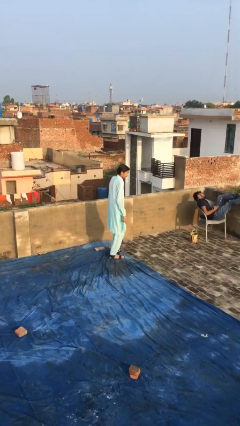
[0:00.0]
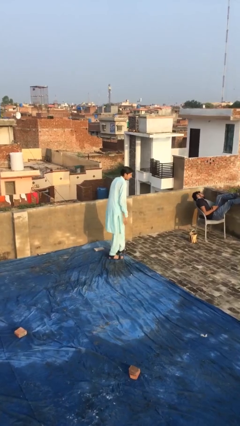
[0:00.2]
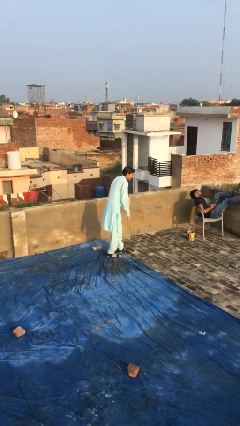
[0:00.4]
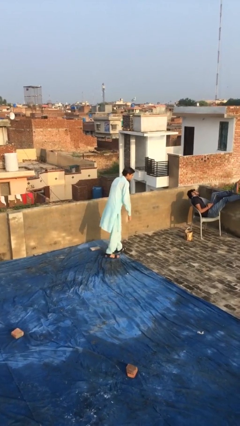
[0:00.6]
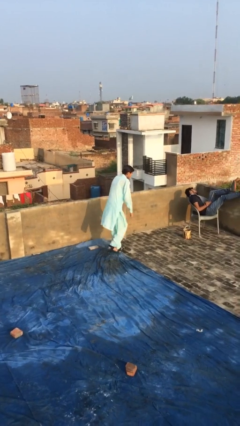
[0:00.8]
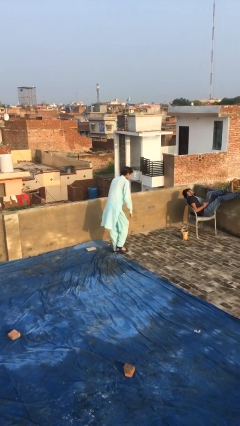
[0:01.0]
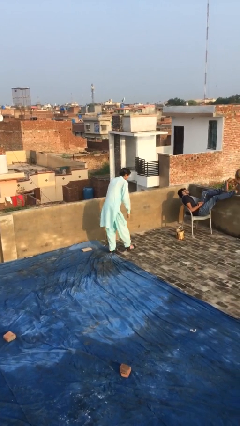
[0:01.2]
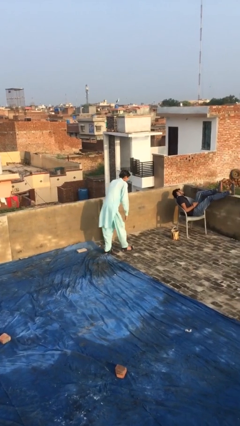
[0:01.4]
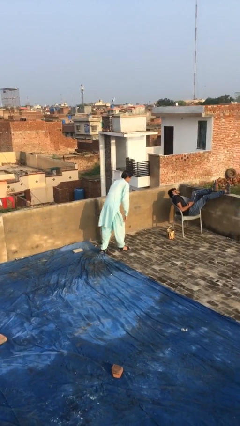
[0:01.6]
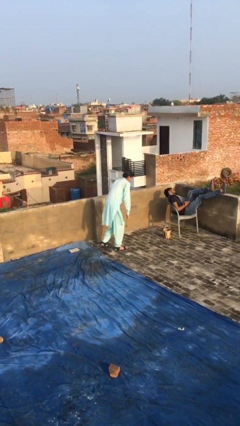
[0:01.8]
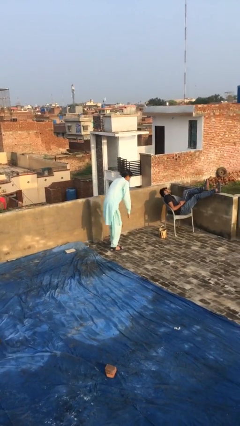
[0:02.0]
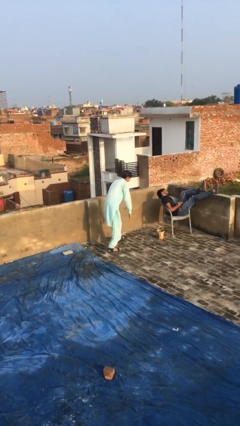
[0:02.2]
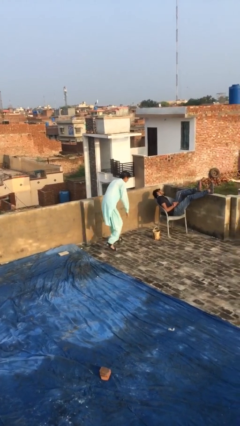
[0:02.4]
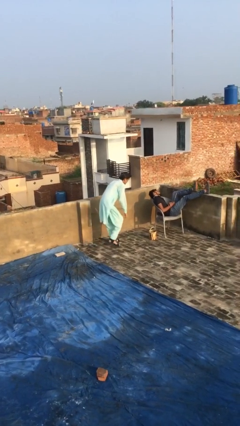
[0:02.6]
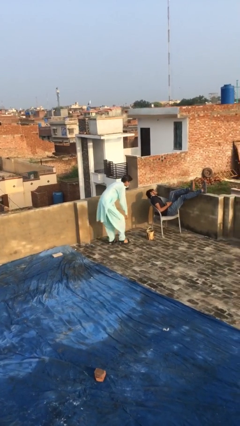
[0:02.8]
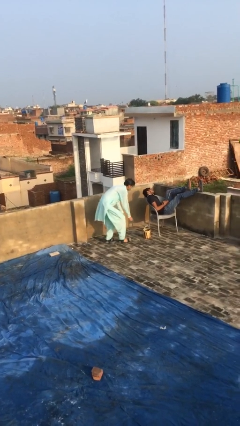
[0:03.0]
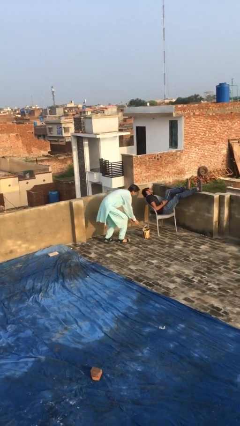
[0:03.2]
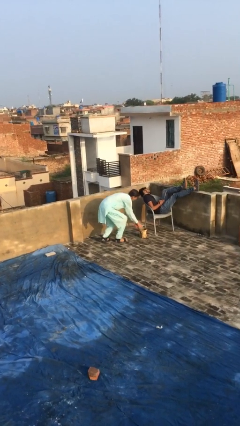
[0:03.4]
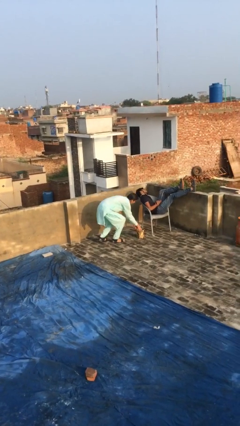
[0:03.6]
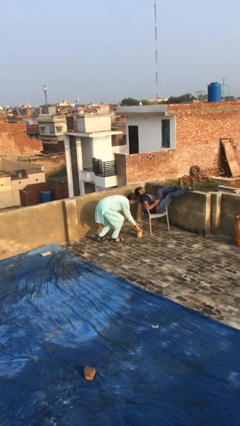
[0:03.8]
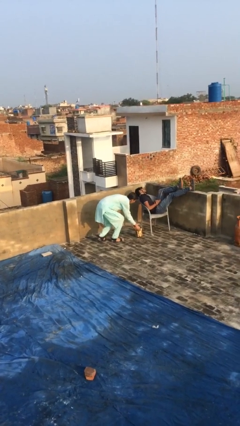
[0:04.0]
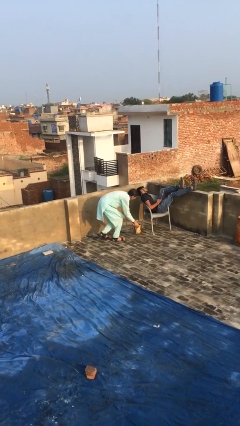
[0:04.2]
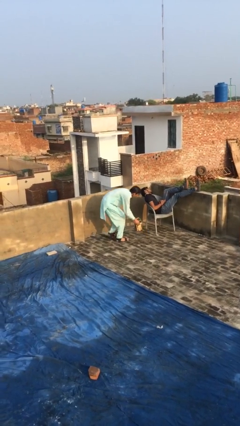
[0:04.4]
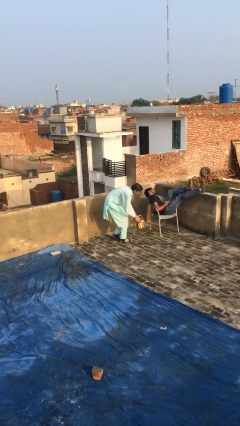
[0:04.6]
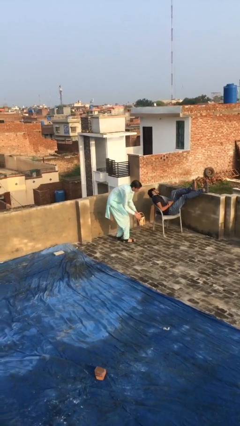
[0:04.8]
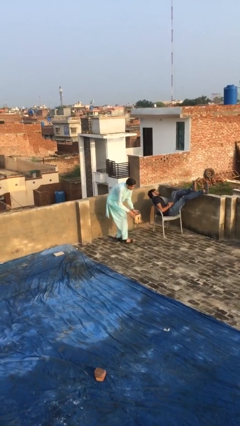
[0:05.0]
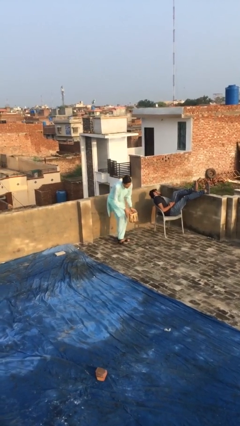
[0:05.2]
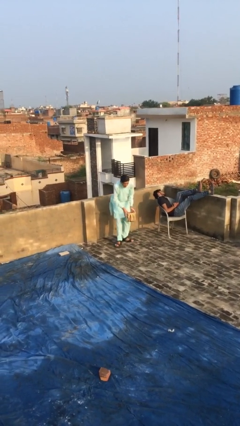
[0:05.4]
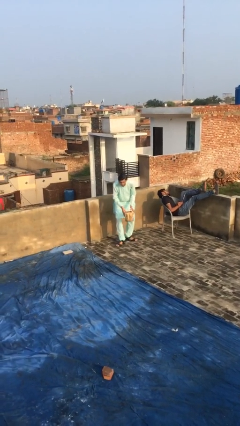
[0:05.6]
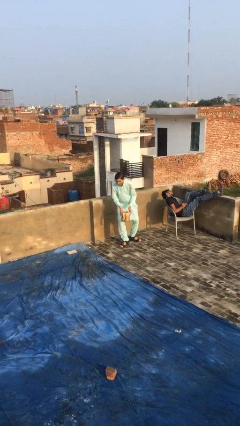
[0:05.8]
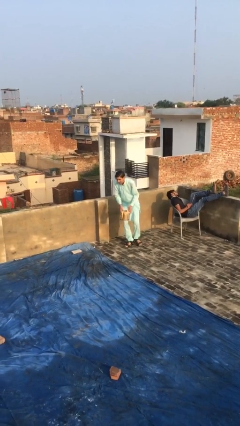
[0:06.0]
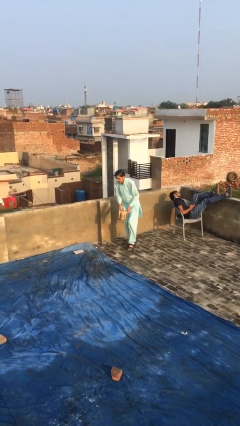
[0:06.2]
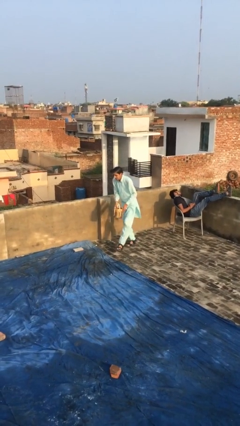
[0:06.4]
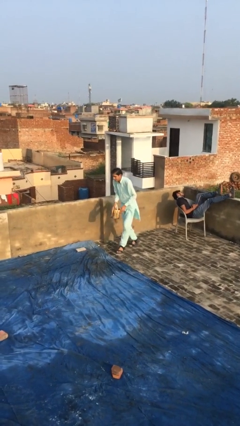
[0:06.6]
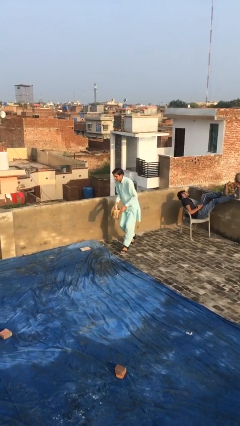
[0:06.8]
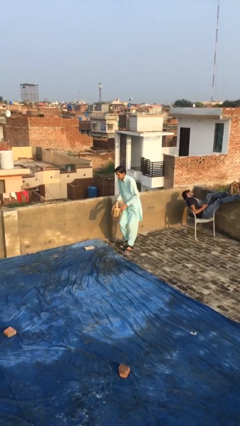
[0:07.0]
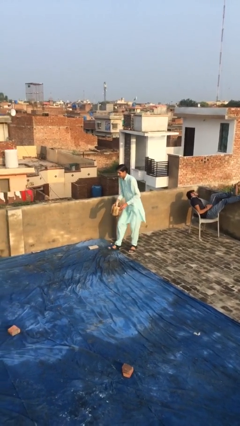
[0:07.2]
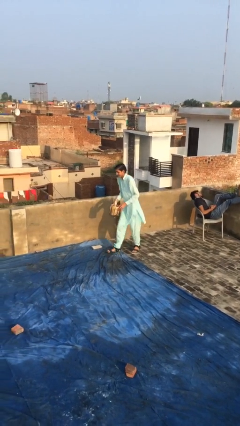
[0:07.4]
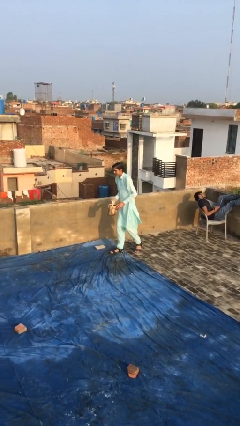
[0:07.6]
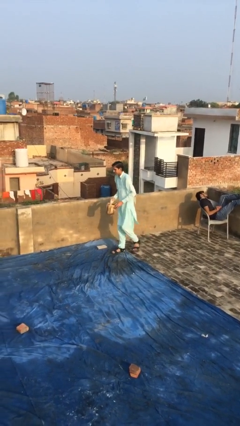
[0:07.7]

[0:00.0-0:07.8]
person steals object from person

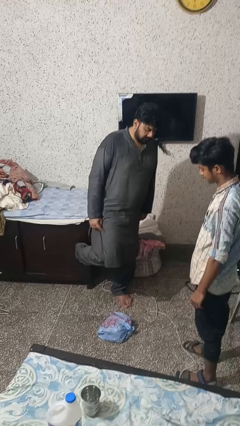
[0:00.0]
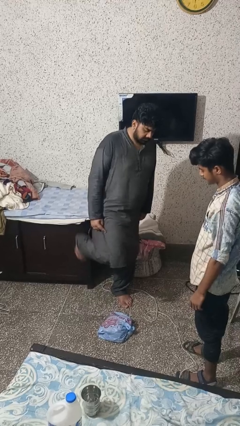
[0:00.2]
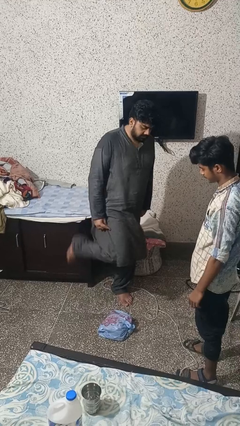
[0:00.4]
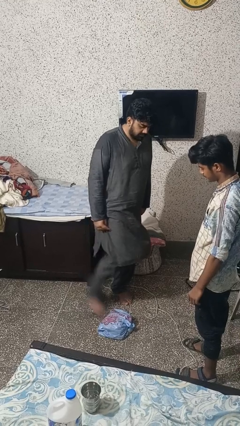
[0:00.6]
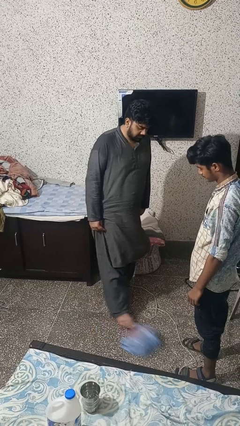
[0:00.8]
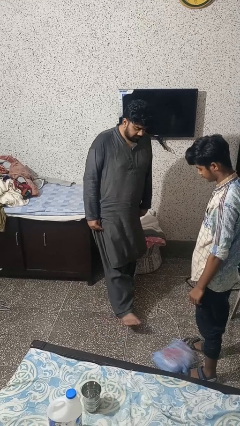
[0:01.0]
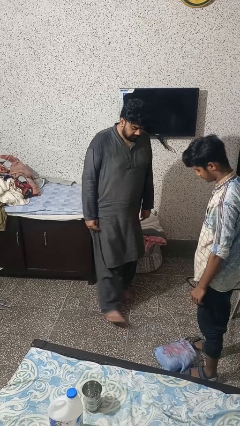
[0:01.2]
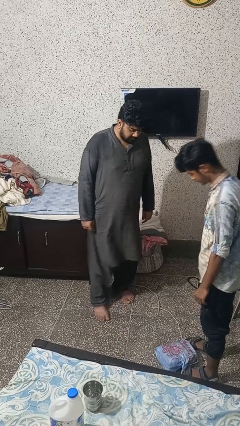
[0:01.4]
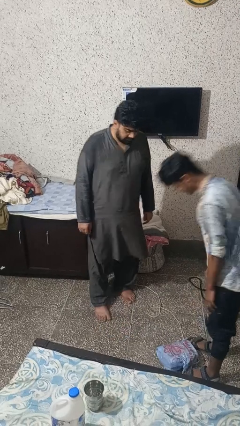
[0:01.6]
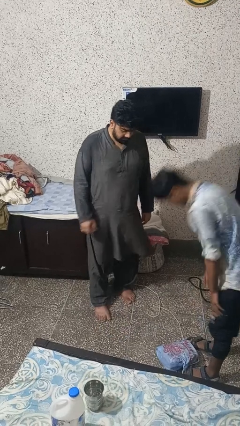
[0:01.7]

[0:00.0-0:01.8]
person kicks object to person

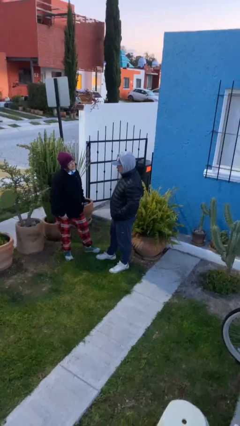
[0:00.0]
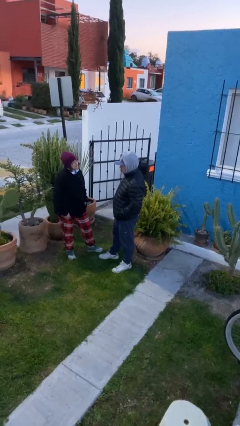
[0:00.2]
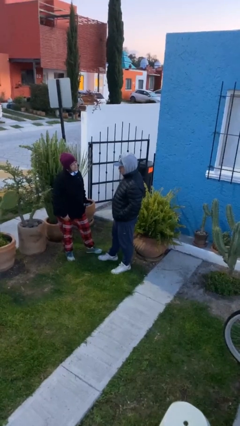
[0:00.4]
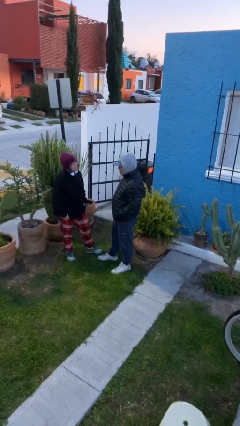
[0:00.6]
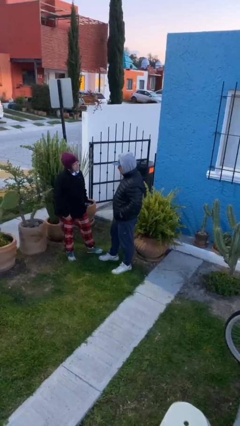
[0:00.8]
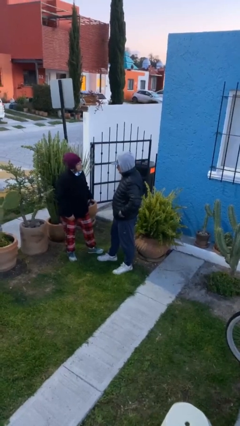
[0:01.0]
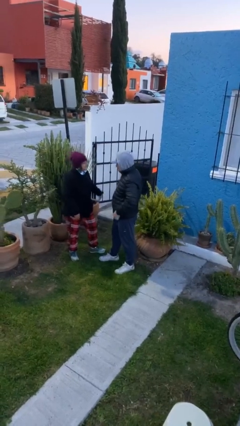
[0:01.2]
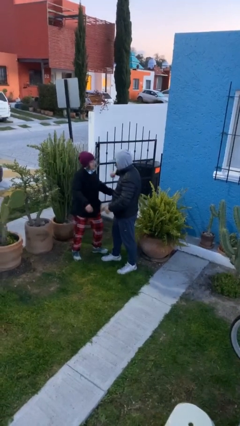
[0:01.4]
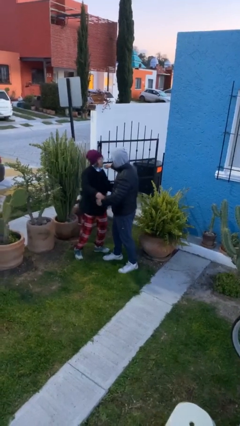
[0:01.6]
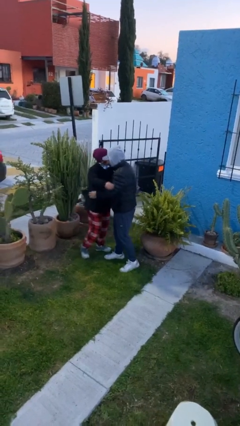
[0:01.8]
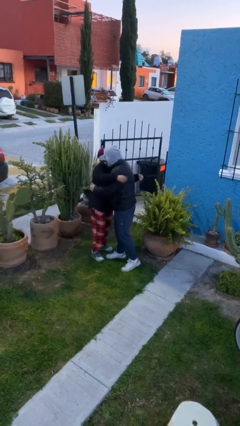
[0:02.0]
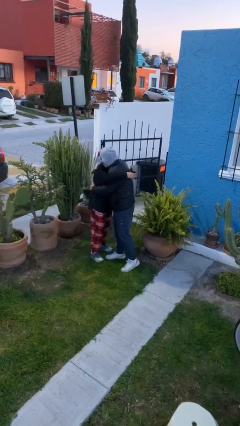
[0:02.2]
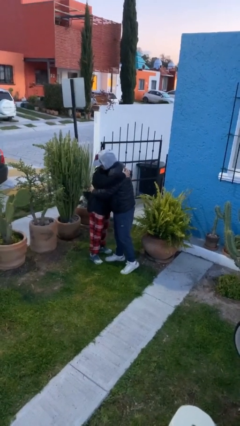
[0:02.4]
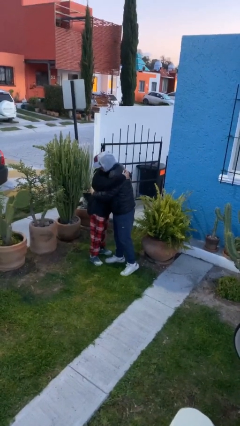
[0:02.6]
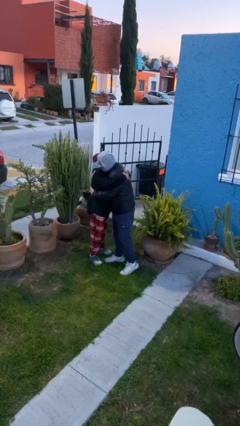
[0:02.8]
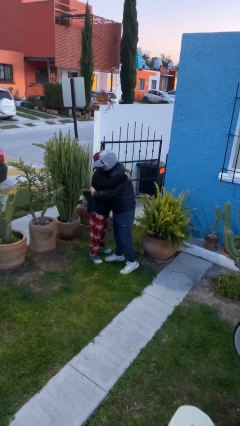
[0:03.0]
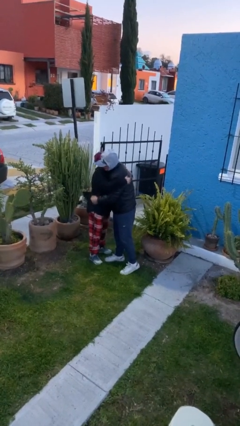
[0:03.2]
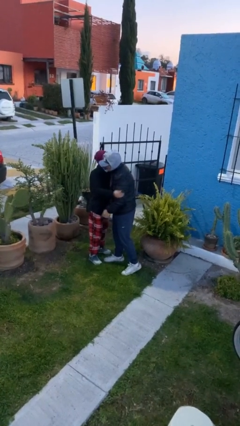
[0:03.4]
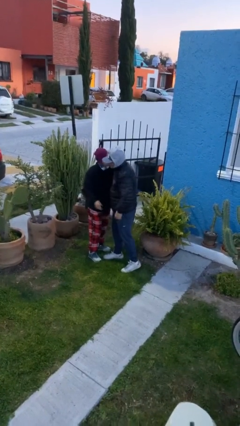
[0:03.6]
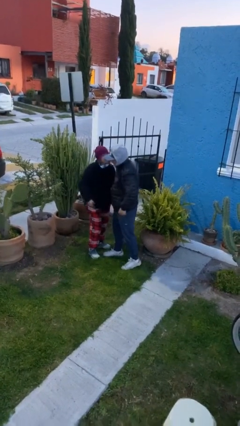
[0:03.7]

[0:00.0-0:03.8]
person embraces person

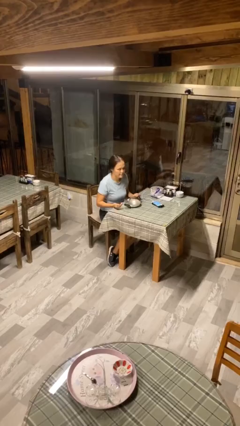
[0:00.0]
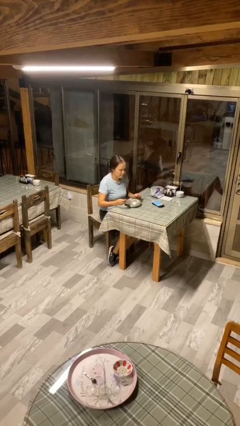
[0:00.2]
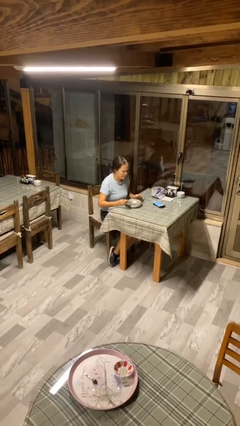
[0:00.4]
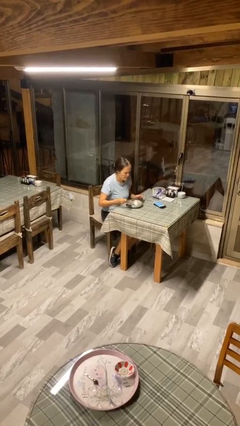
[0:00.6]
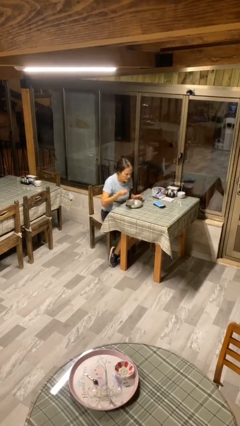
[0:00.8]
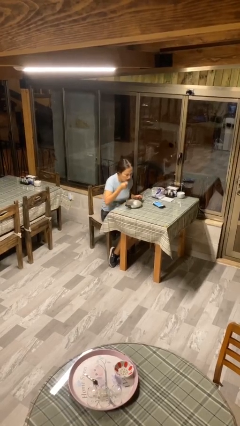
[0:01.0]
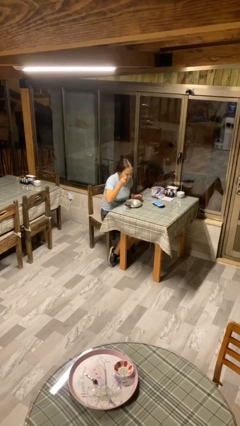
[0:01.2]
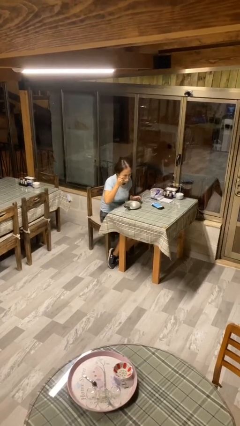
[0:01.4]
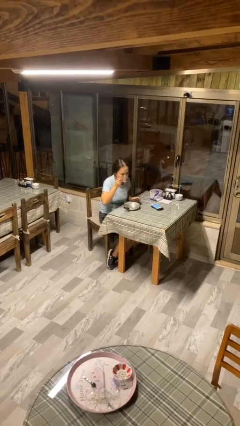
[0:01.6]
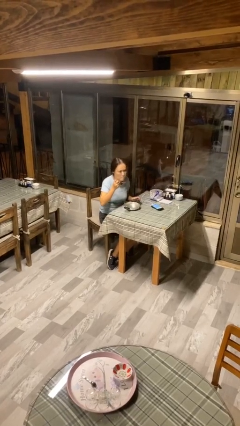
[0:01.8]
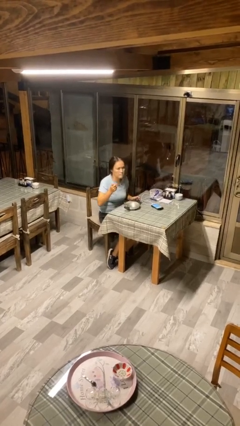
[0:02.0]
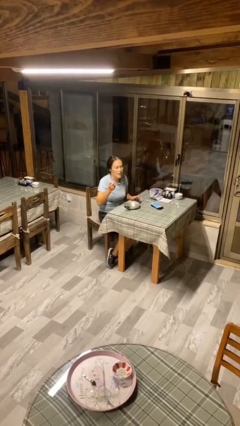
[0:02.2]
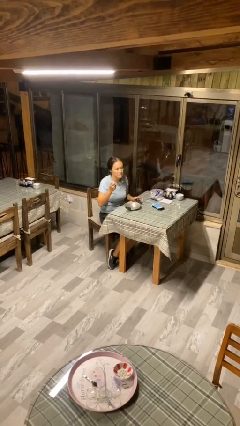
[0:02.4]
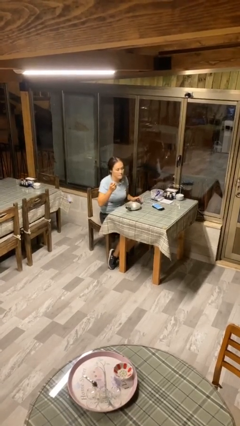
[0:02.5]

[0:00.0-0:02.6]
person eats with utensil

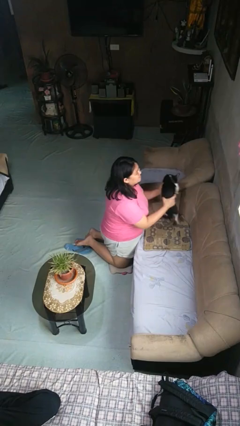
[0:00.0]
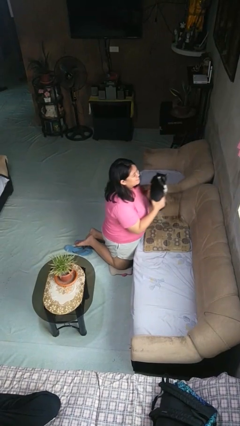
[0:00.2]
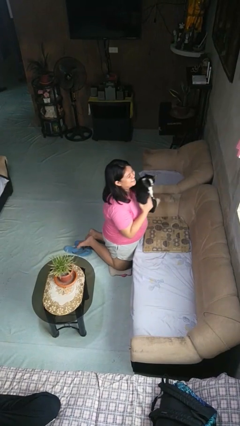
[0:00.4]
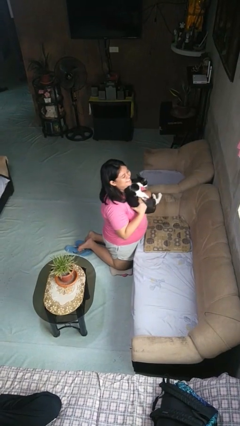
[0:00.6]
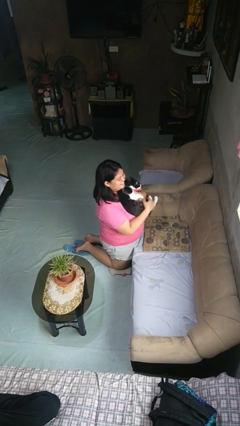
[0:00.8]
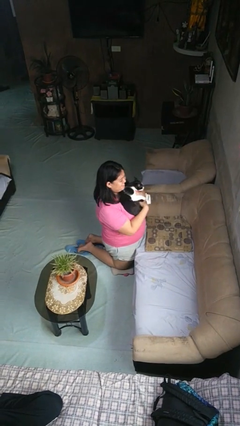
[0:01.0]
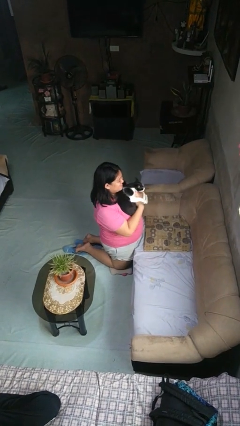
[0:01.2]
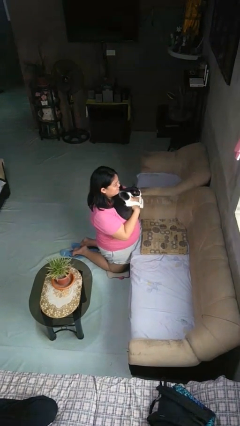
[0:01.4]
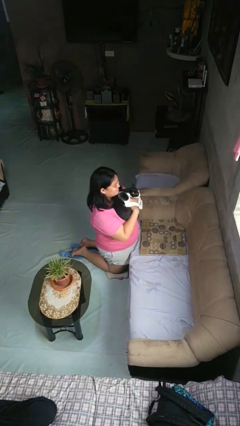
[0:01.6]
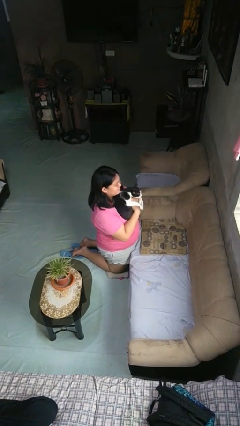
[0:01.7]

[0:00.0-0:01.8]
person hugs cat
